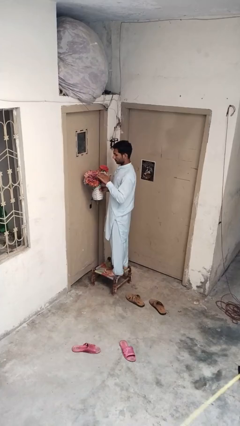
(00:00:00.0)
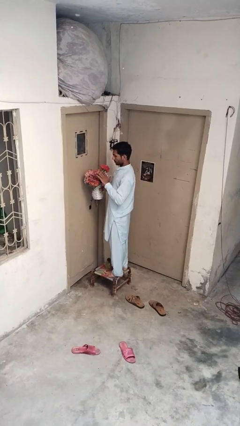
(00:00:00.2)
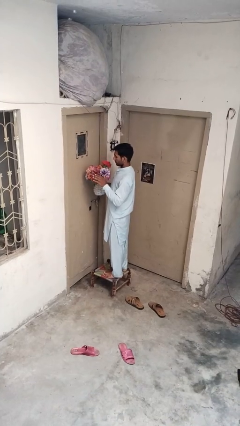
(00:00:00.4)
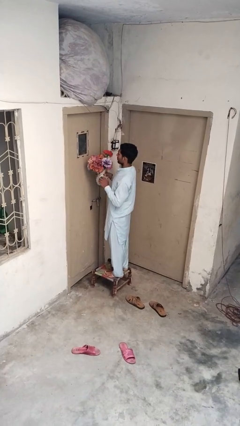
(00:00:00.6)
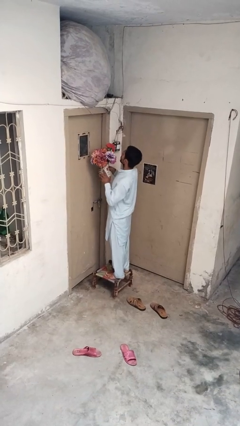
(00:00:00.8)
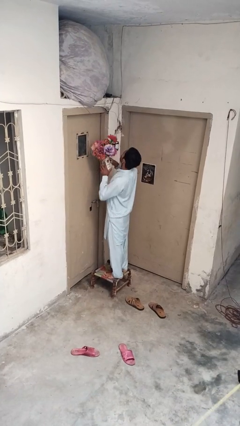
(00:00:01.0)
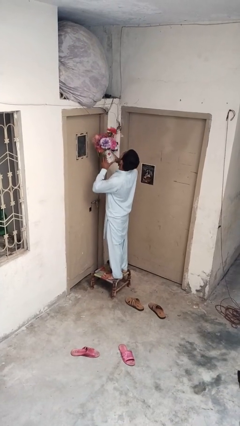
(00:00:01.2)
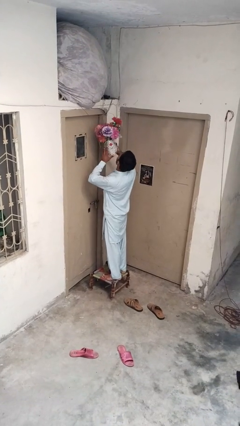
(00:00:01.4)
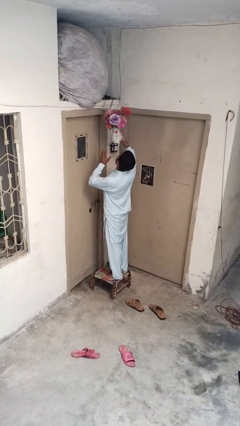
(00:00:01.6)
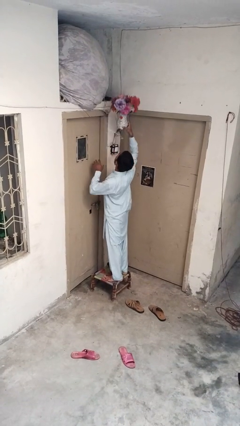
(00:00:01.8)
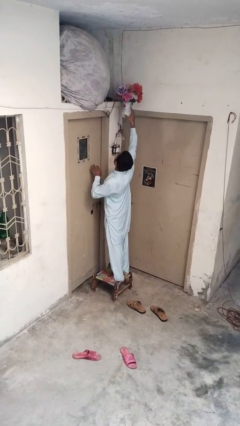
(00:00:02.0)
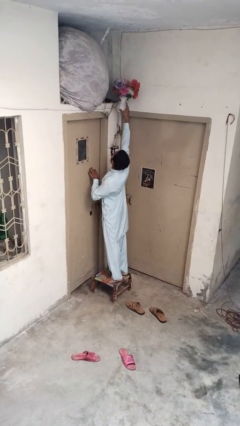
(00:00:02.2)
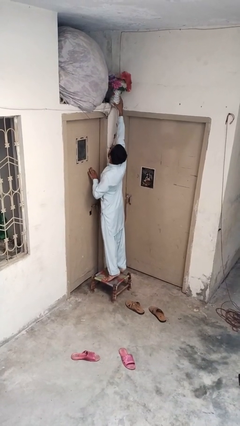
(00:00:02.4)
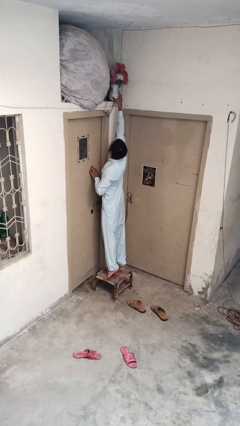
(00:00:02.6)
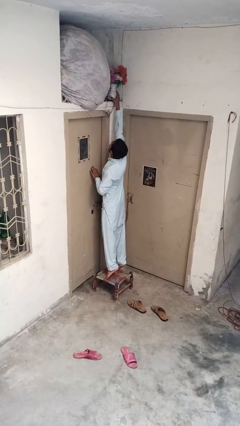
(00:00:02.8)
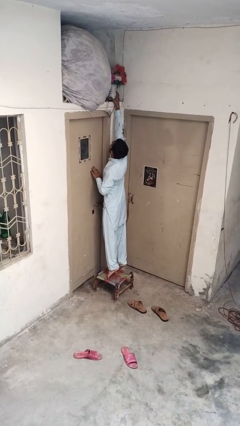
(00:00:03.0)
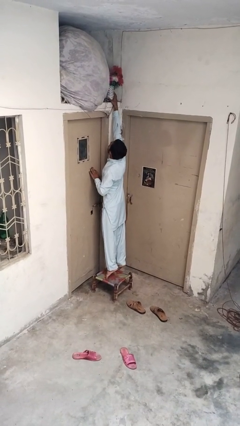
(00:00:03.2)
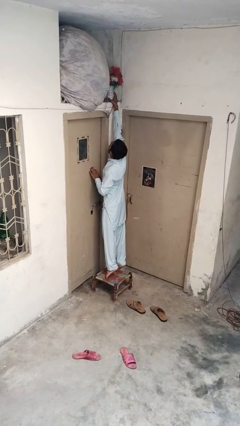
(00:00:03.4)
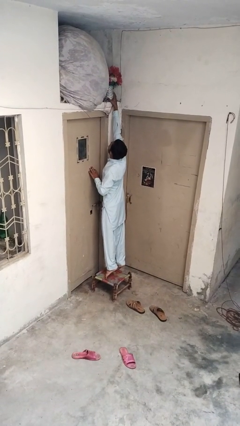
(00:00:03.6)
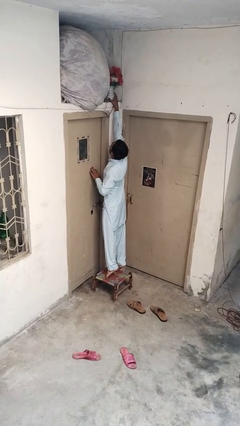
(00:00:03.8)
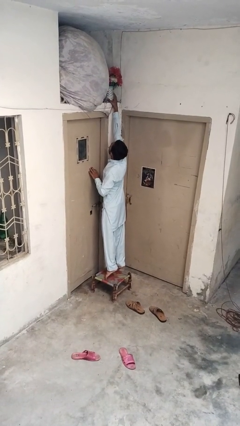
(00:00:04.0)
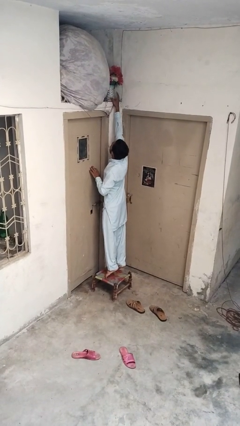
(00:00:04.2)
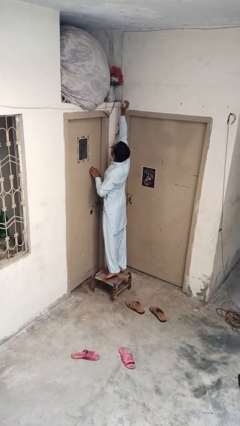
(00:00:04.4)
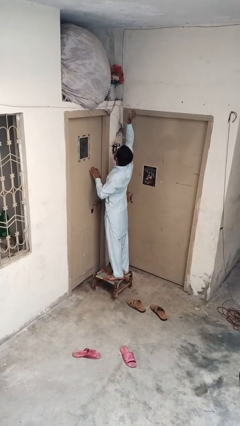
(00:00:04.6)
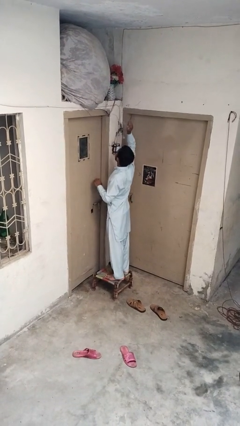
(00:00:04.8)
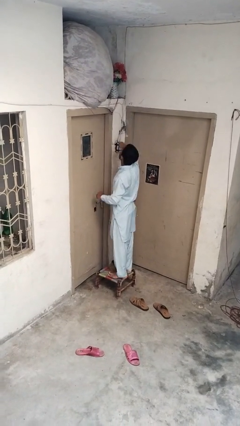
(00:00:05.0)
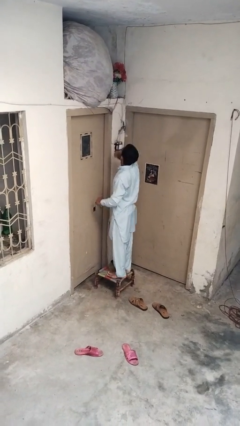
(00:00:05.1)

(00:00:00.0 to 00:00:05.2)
person puts down object on shelf

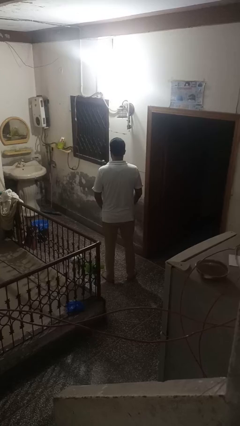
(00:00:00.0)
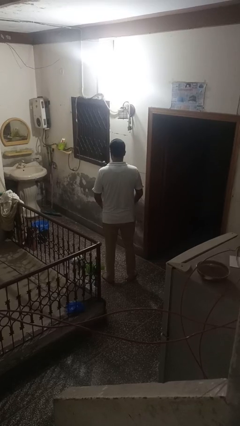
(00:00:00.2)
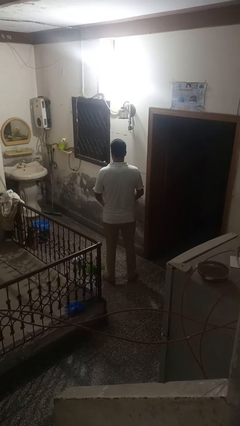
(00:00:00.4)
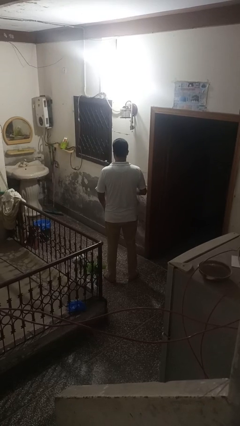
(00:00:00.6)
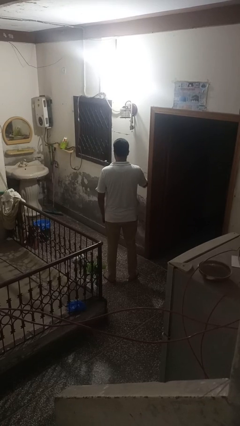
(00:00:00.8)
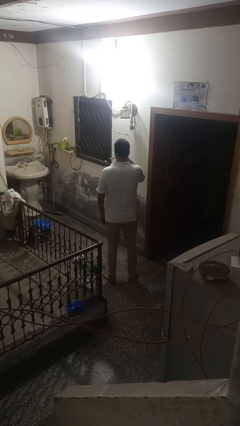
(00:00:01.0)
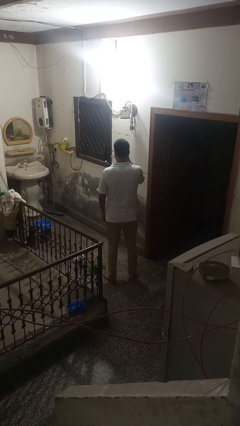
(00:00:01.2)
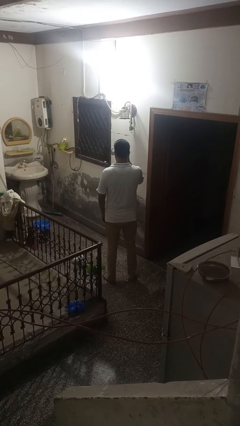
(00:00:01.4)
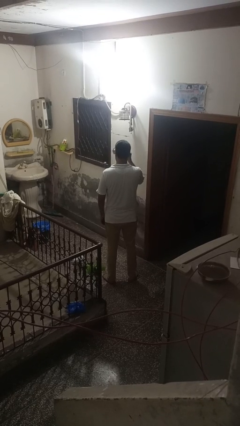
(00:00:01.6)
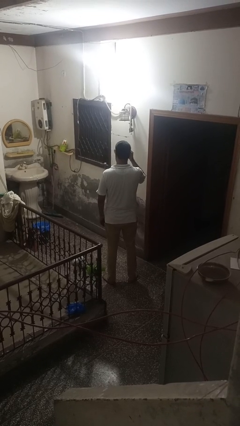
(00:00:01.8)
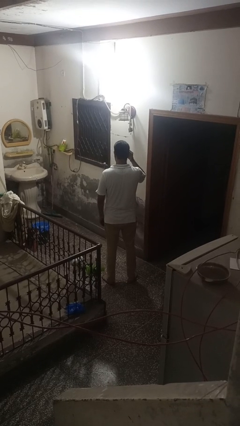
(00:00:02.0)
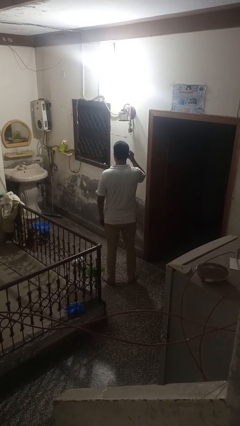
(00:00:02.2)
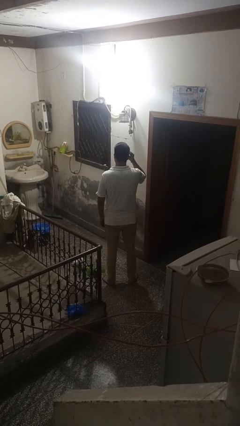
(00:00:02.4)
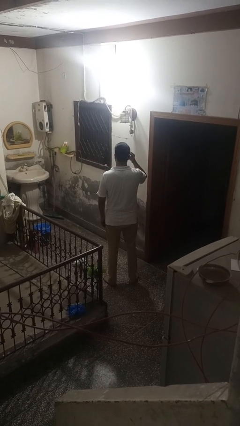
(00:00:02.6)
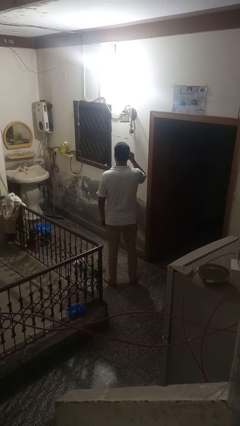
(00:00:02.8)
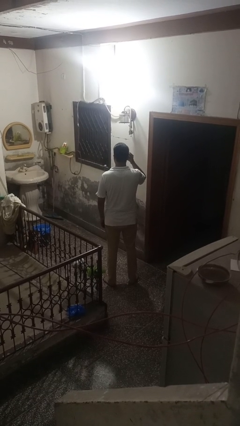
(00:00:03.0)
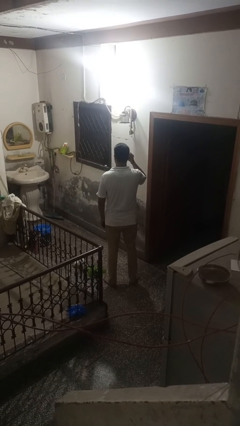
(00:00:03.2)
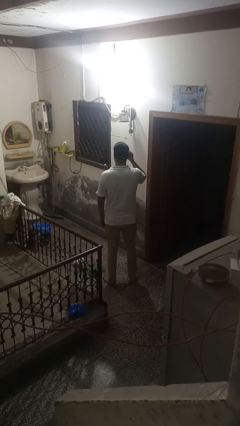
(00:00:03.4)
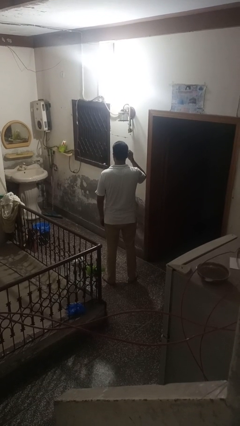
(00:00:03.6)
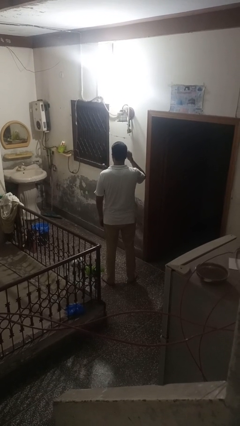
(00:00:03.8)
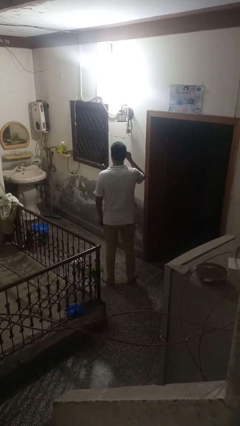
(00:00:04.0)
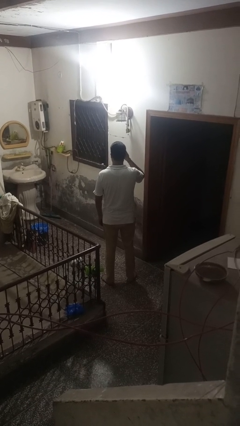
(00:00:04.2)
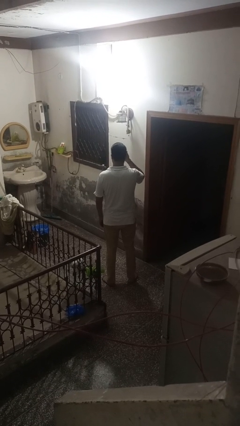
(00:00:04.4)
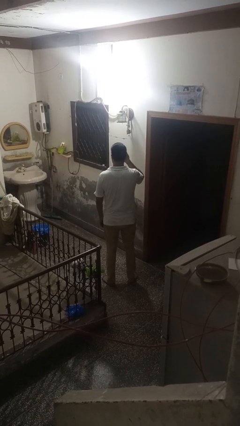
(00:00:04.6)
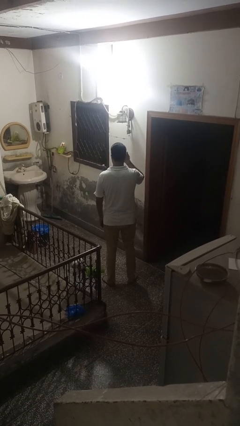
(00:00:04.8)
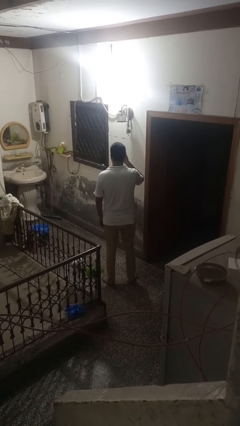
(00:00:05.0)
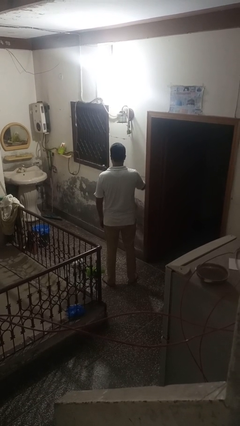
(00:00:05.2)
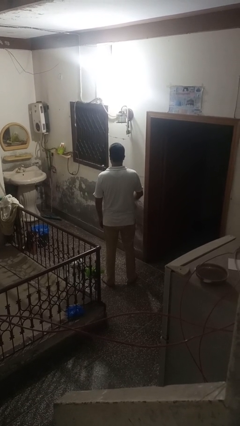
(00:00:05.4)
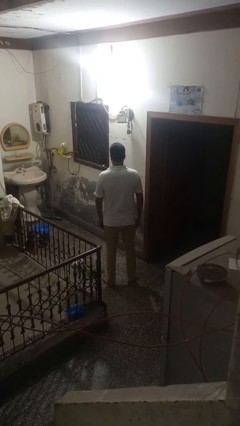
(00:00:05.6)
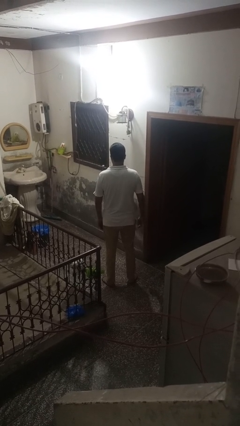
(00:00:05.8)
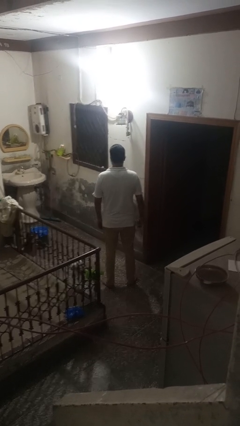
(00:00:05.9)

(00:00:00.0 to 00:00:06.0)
person puts on sunglasses

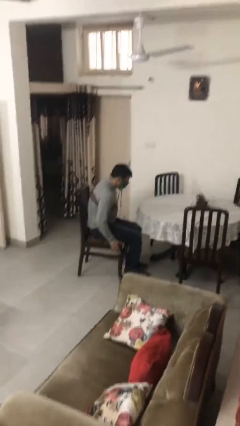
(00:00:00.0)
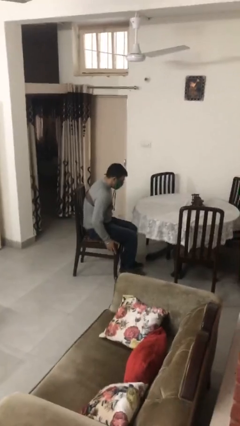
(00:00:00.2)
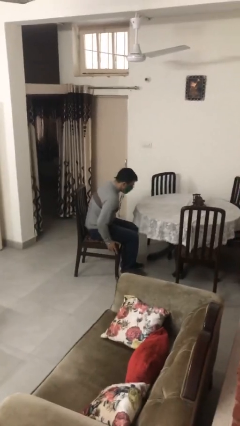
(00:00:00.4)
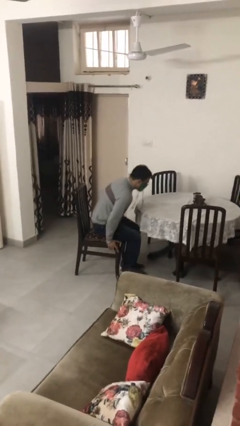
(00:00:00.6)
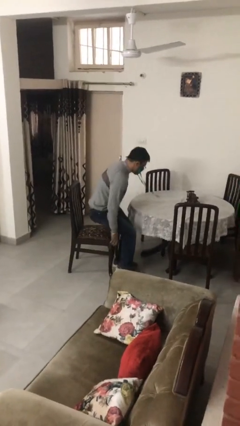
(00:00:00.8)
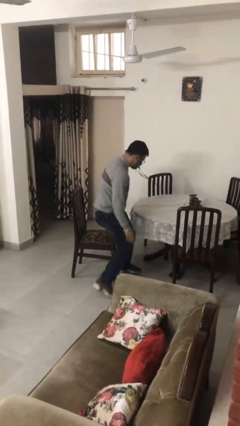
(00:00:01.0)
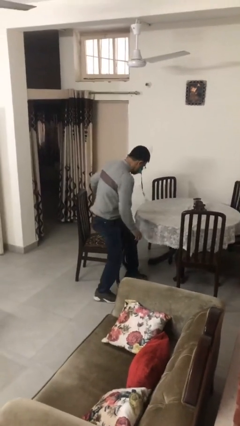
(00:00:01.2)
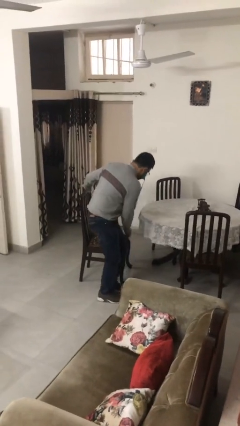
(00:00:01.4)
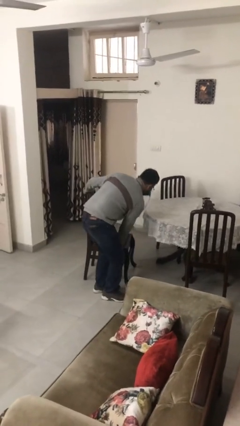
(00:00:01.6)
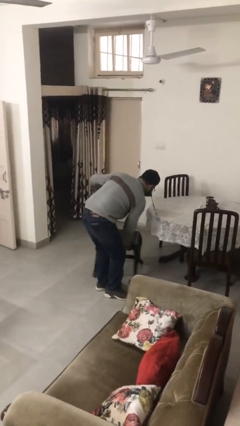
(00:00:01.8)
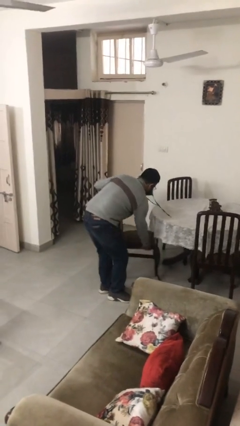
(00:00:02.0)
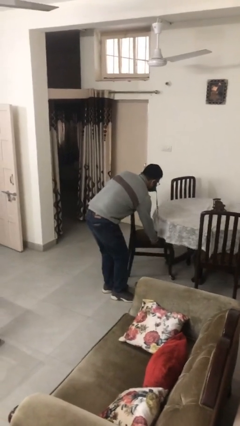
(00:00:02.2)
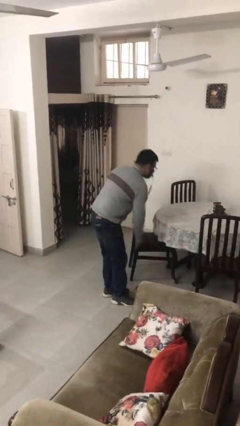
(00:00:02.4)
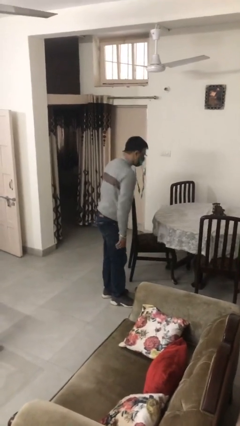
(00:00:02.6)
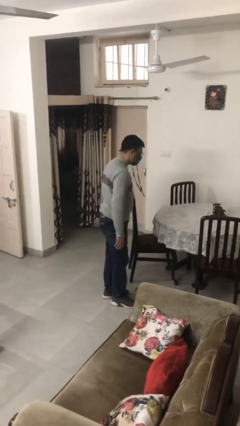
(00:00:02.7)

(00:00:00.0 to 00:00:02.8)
person stands up

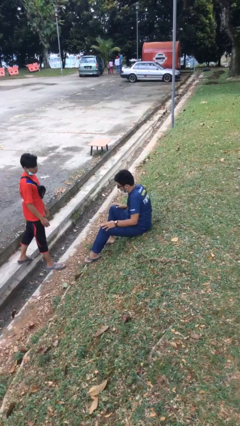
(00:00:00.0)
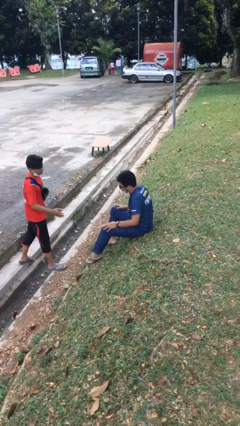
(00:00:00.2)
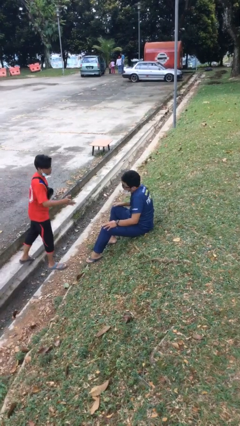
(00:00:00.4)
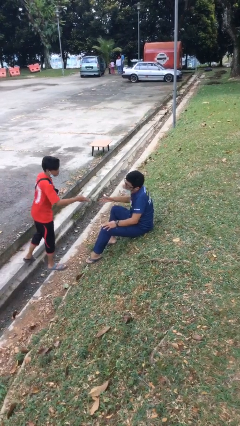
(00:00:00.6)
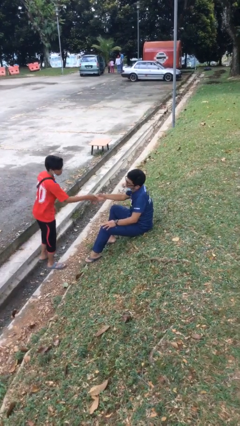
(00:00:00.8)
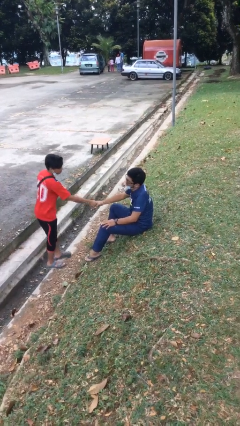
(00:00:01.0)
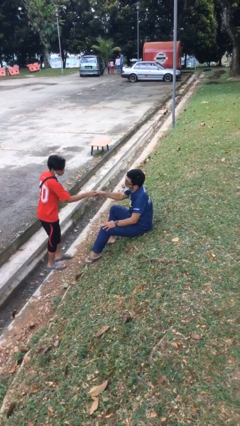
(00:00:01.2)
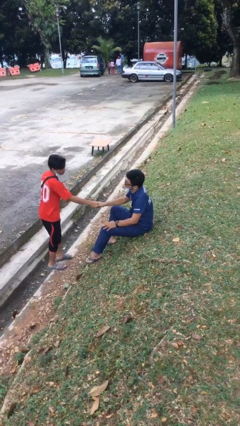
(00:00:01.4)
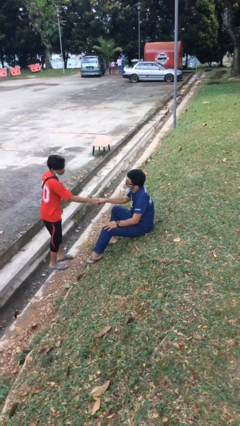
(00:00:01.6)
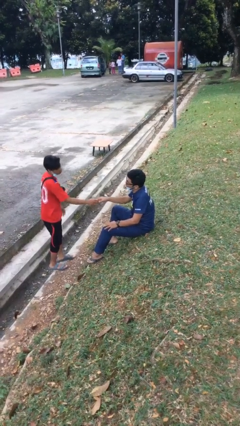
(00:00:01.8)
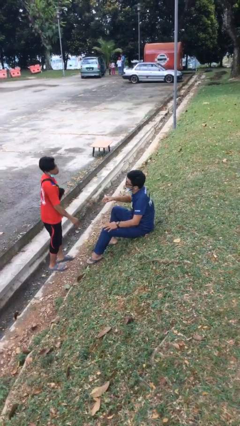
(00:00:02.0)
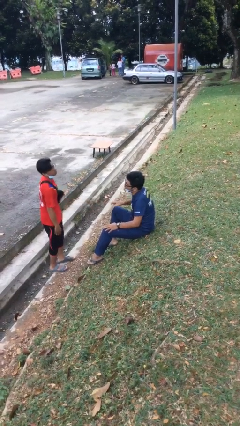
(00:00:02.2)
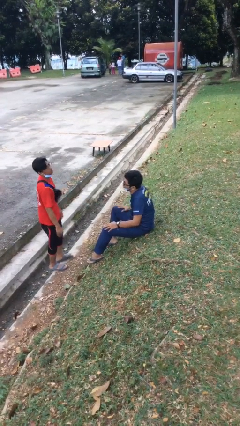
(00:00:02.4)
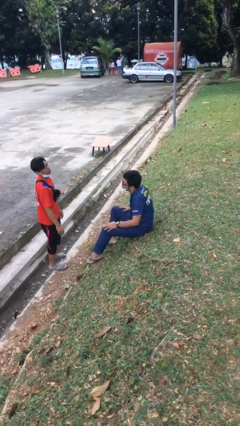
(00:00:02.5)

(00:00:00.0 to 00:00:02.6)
person shakes hand

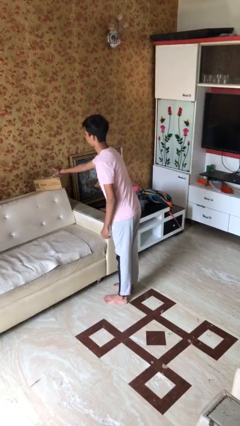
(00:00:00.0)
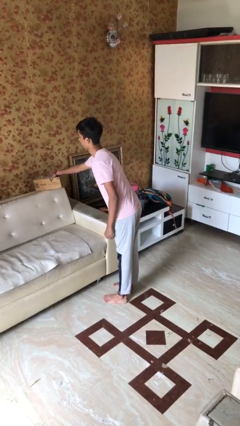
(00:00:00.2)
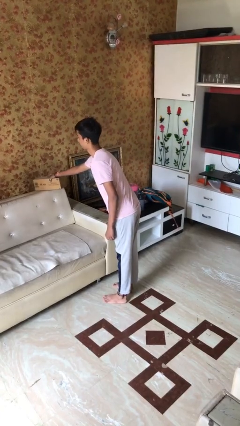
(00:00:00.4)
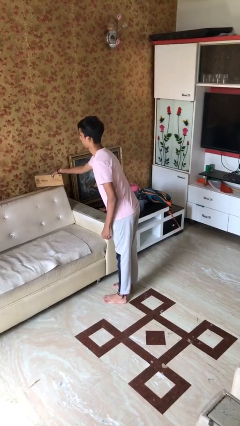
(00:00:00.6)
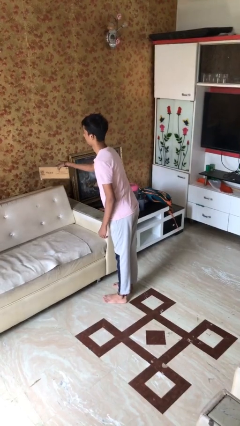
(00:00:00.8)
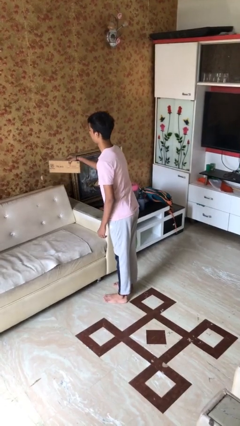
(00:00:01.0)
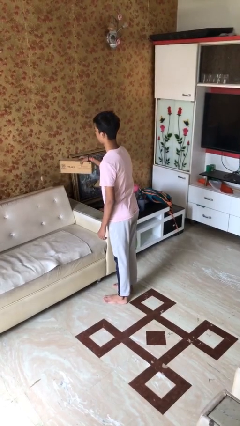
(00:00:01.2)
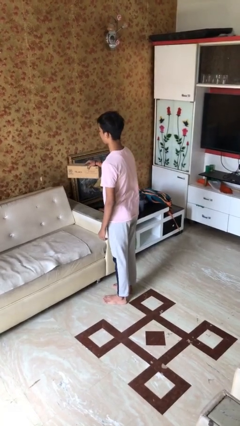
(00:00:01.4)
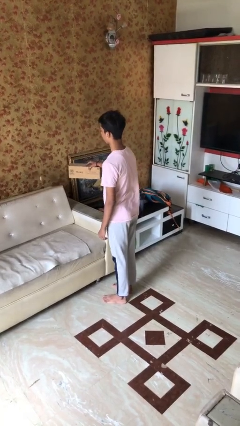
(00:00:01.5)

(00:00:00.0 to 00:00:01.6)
person picks up object from couch
